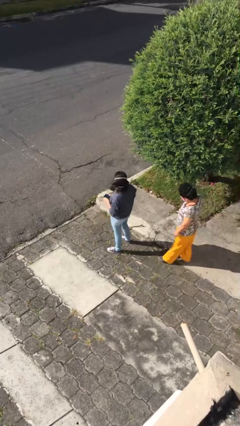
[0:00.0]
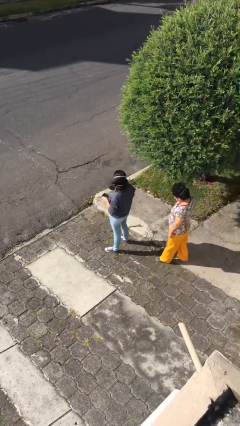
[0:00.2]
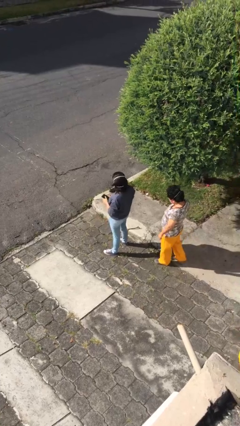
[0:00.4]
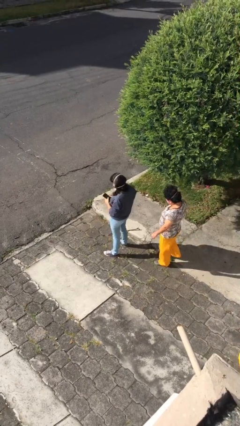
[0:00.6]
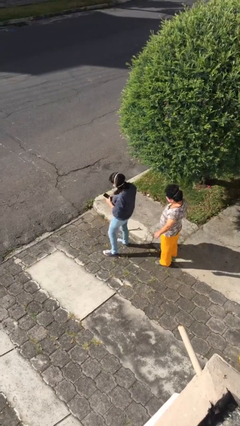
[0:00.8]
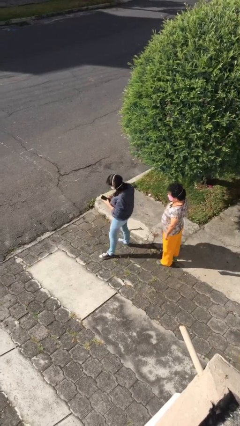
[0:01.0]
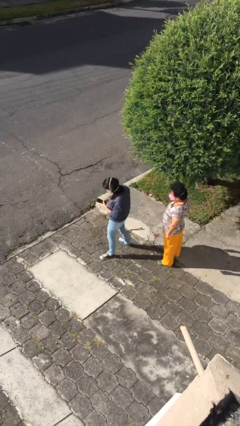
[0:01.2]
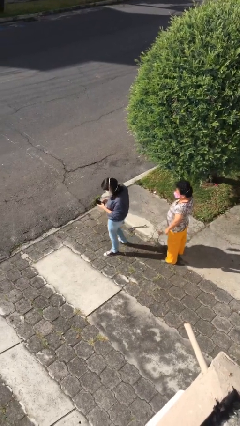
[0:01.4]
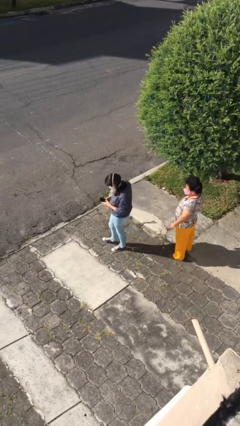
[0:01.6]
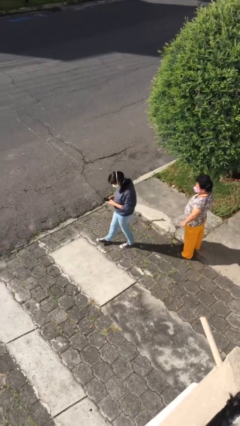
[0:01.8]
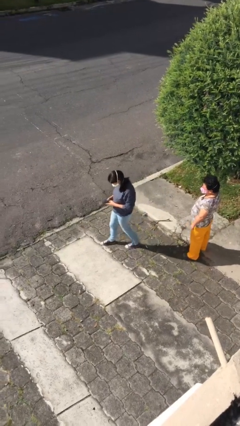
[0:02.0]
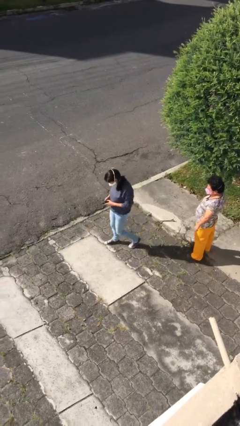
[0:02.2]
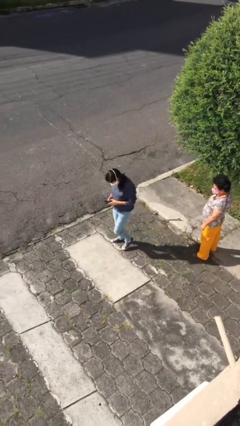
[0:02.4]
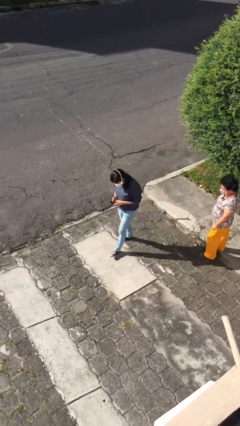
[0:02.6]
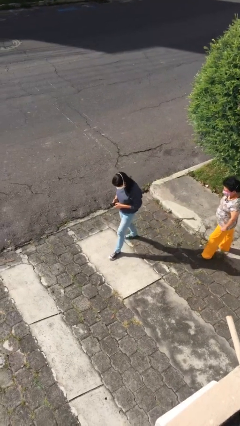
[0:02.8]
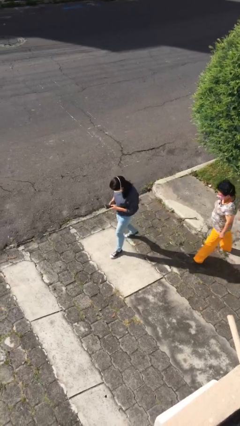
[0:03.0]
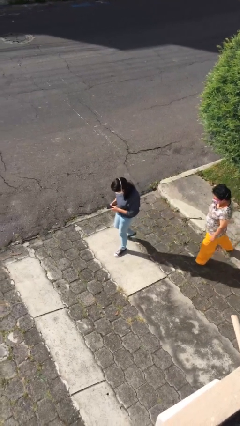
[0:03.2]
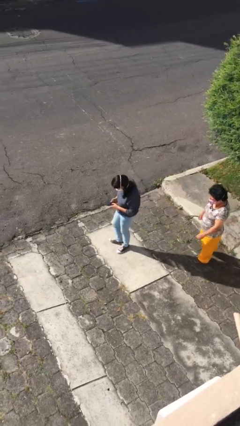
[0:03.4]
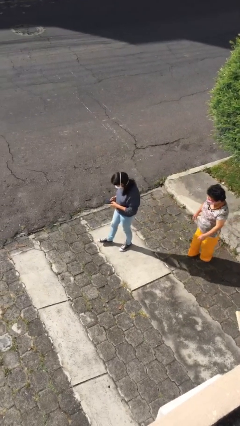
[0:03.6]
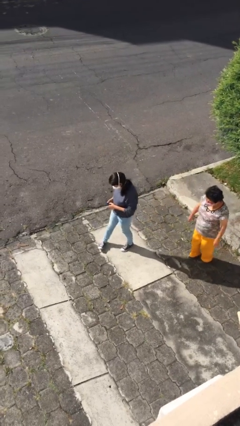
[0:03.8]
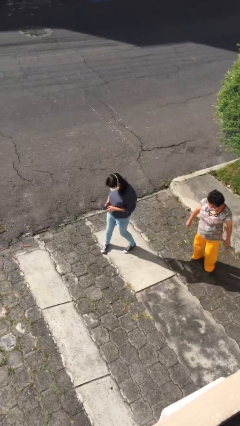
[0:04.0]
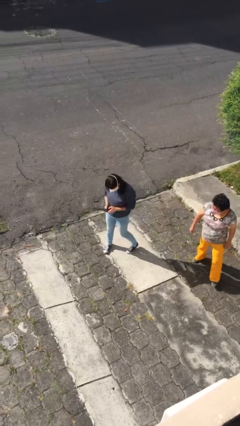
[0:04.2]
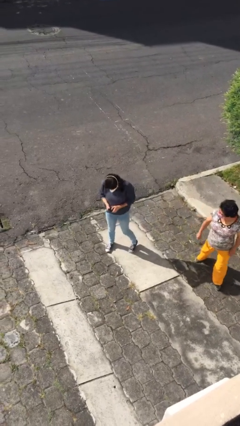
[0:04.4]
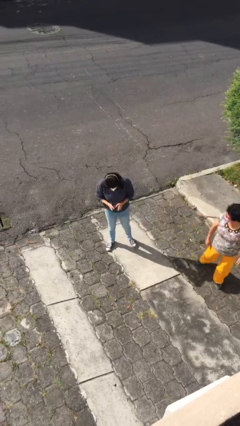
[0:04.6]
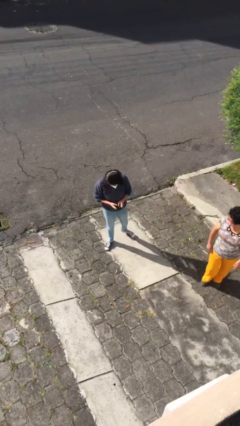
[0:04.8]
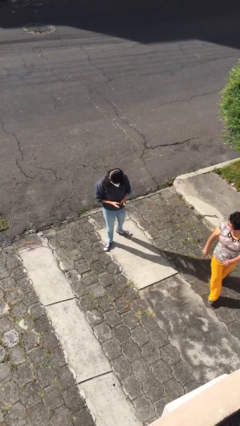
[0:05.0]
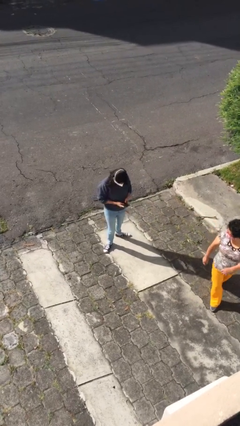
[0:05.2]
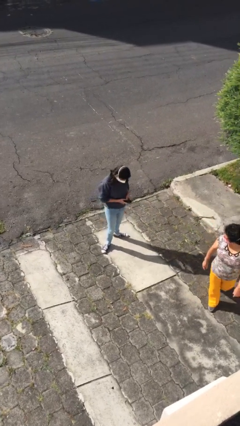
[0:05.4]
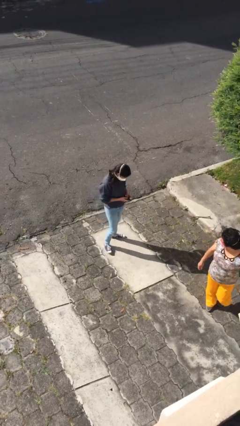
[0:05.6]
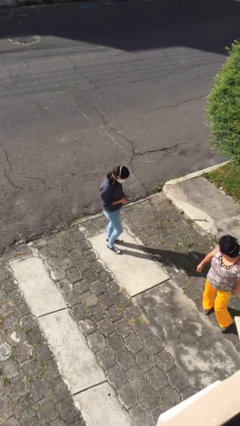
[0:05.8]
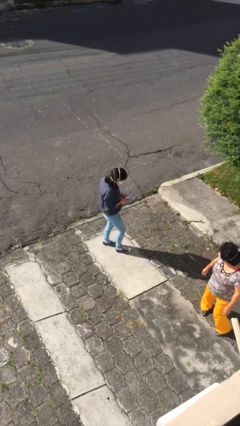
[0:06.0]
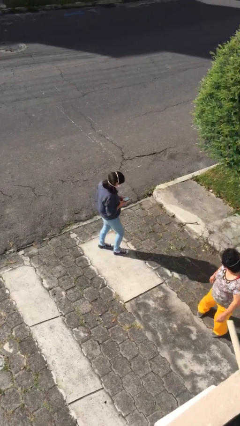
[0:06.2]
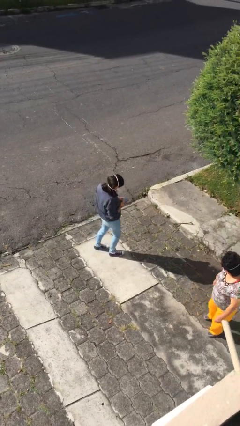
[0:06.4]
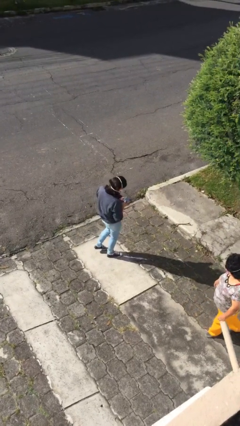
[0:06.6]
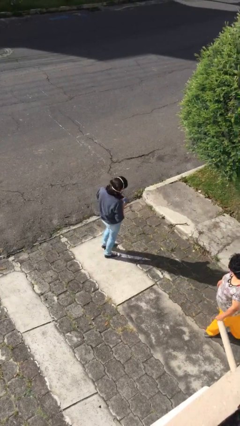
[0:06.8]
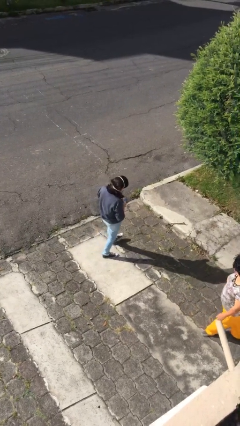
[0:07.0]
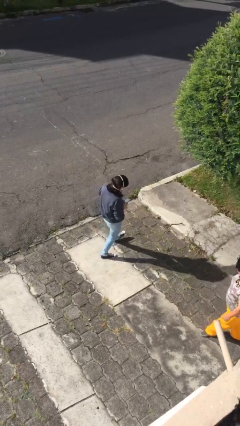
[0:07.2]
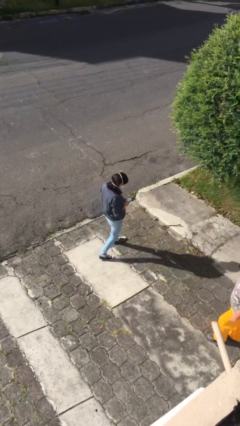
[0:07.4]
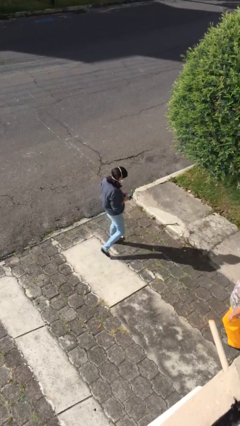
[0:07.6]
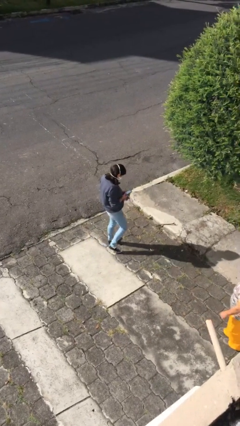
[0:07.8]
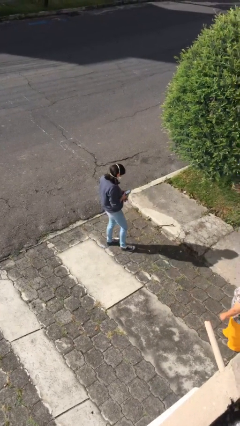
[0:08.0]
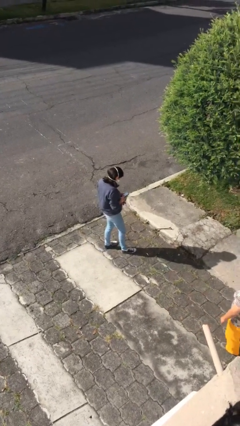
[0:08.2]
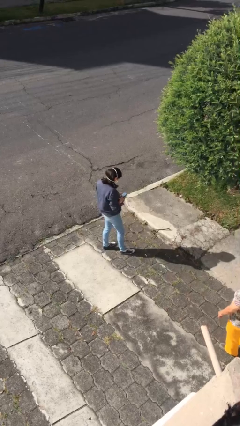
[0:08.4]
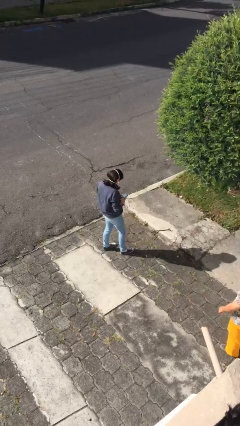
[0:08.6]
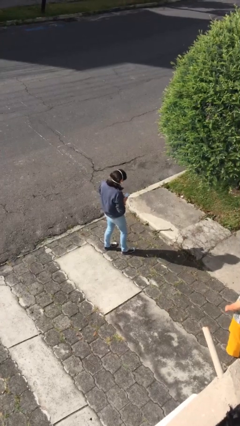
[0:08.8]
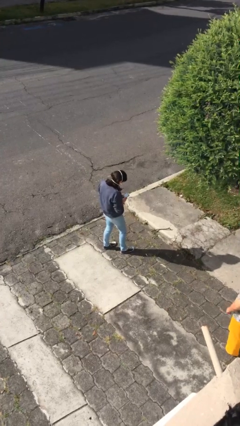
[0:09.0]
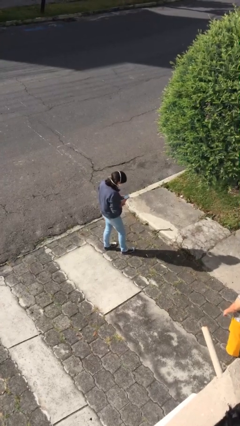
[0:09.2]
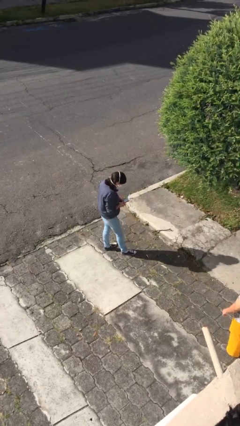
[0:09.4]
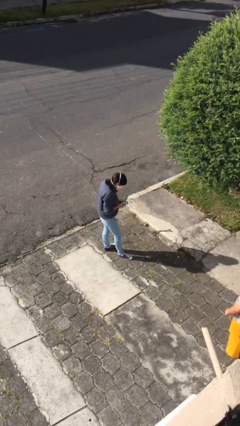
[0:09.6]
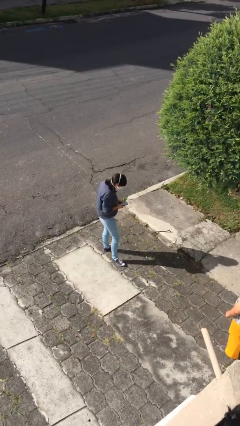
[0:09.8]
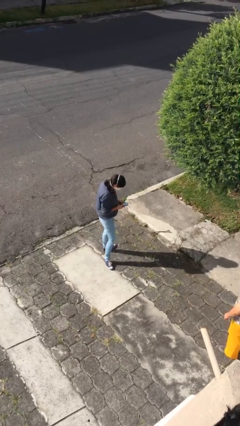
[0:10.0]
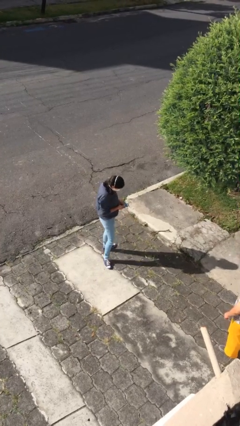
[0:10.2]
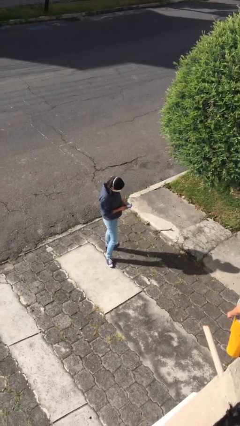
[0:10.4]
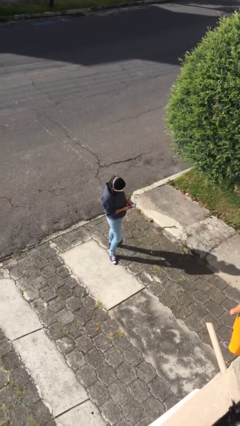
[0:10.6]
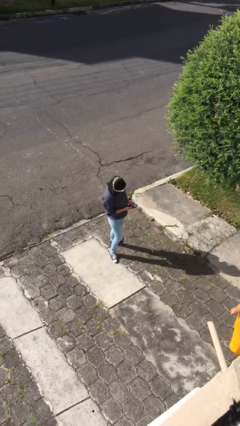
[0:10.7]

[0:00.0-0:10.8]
person texts on phone

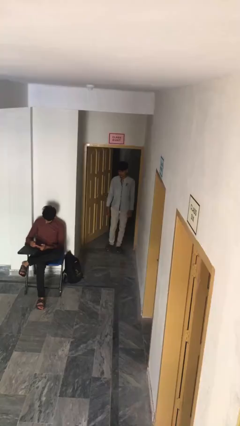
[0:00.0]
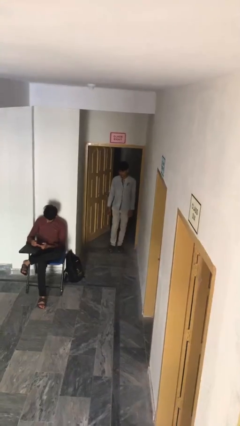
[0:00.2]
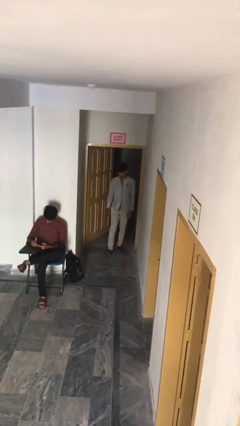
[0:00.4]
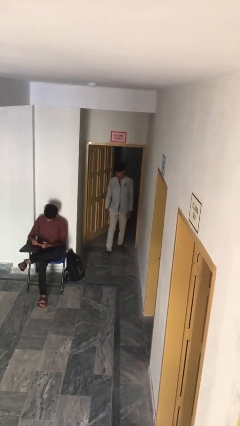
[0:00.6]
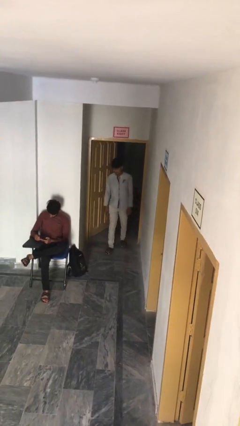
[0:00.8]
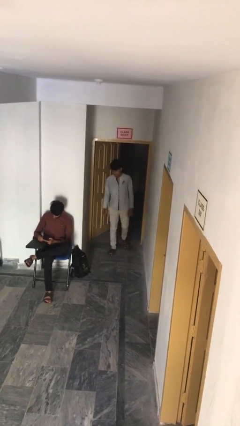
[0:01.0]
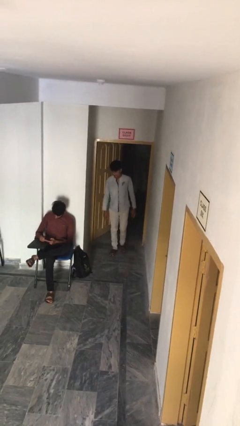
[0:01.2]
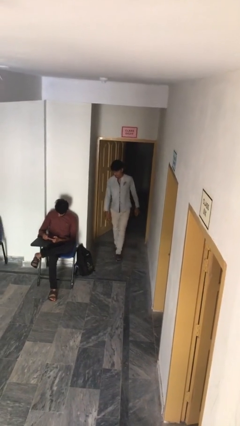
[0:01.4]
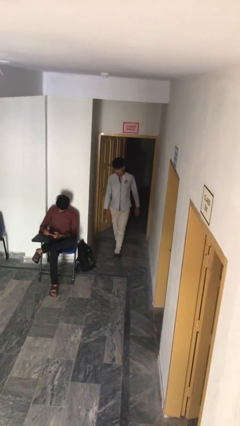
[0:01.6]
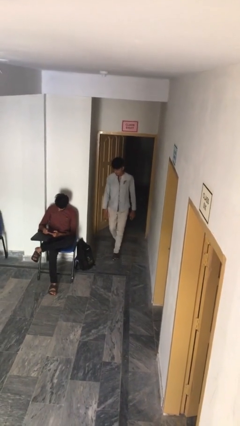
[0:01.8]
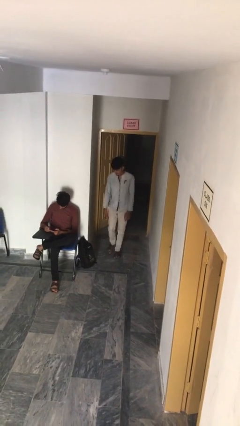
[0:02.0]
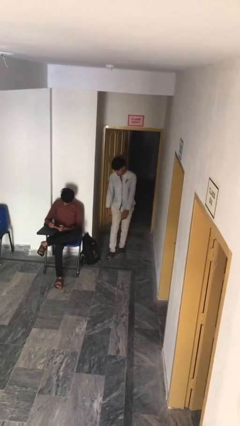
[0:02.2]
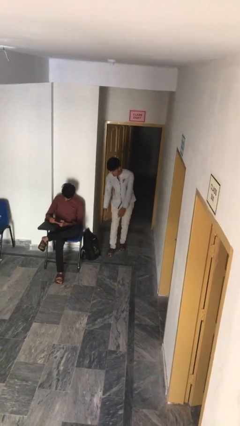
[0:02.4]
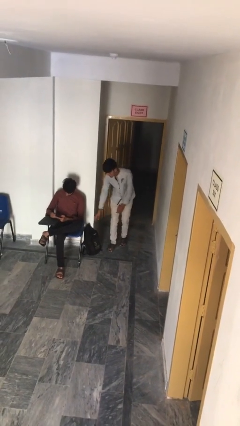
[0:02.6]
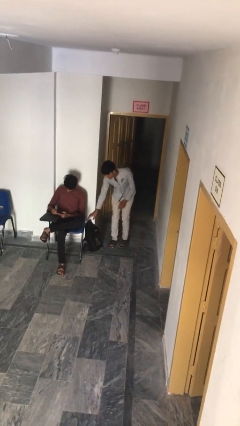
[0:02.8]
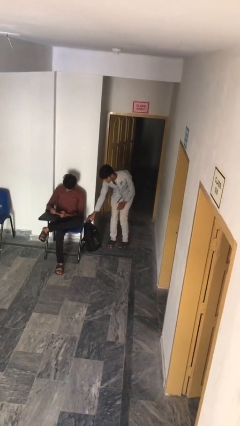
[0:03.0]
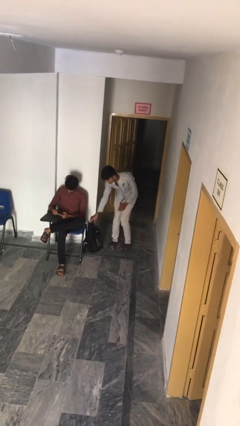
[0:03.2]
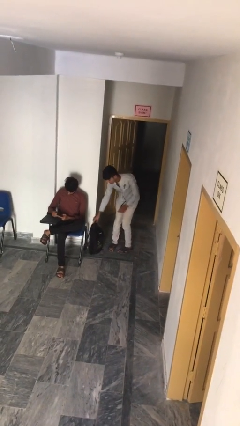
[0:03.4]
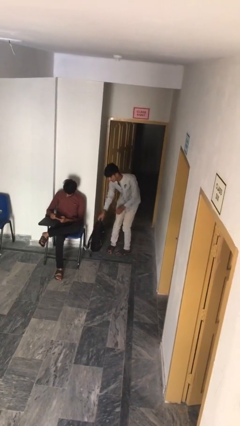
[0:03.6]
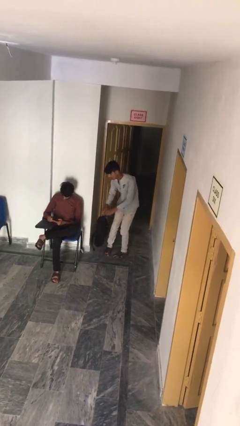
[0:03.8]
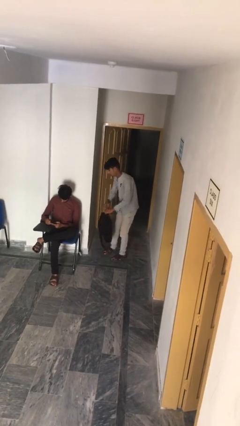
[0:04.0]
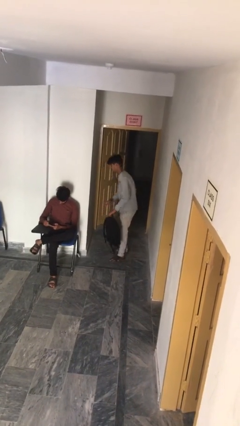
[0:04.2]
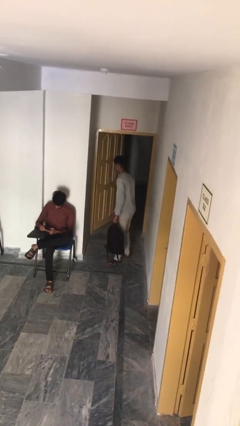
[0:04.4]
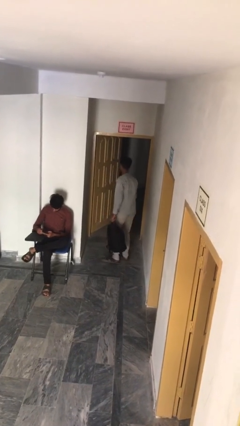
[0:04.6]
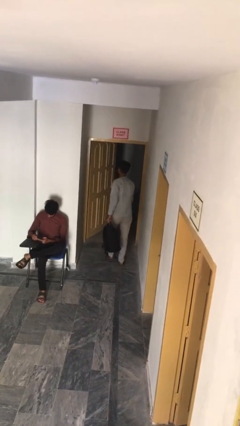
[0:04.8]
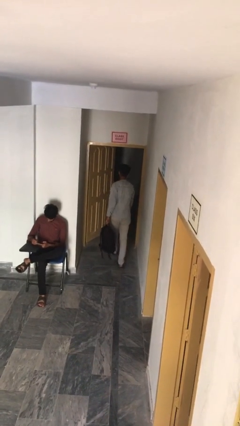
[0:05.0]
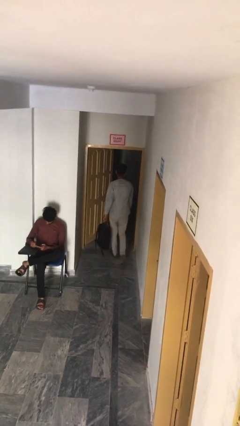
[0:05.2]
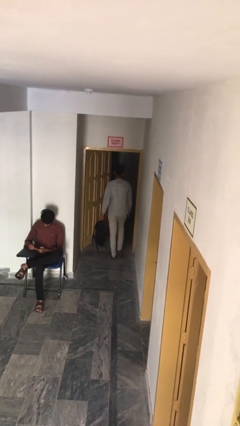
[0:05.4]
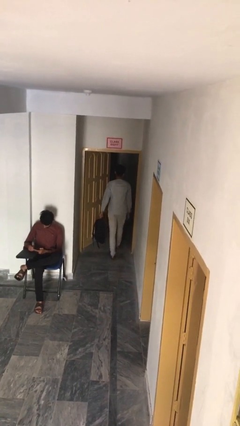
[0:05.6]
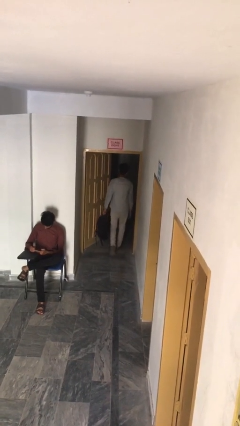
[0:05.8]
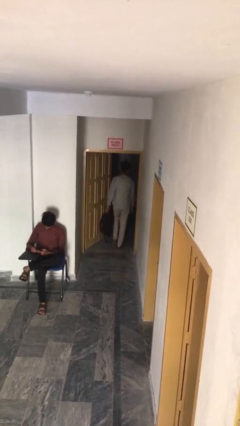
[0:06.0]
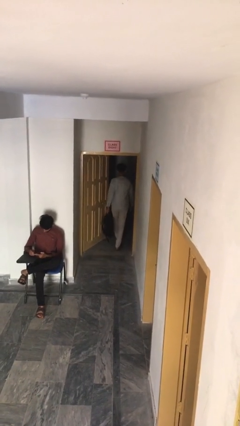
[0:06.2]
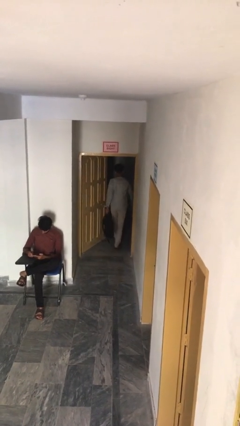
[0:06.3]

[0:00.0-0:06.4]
person steals object from person

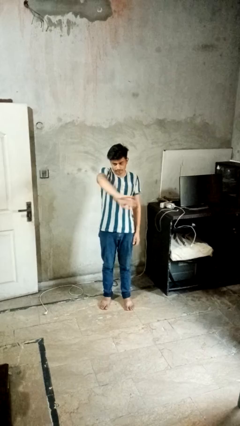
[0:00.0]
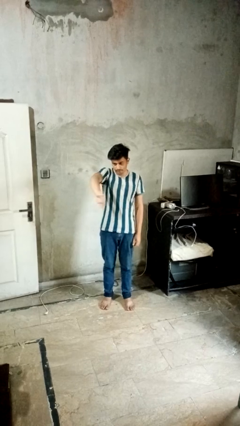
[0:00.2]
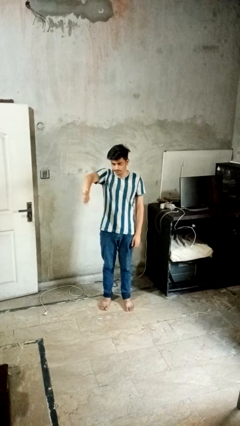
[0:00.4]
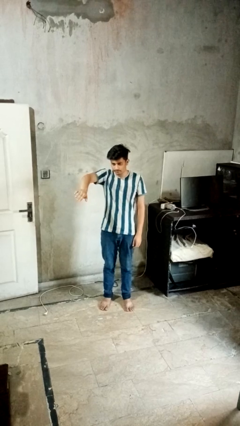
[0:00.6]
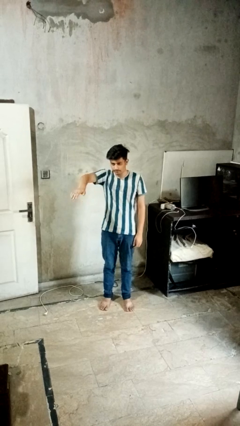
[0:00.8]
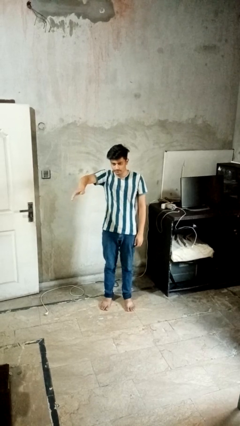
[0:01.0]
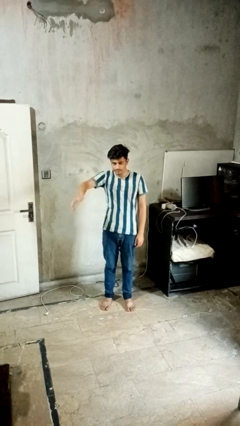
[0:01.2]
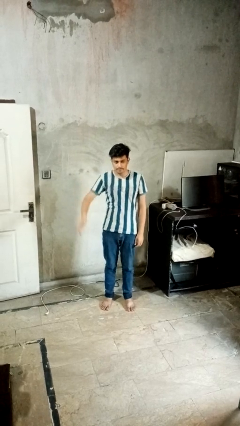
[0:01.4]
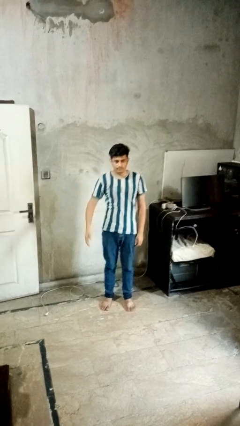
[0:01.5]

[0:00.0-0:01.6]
person gestures swipe right
